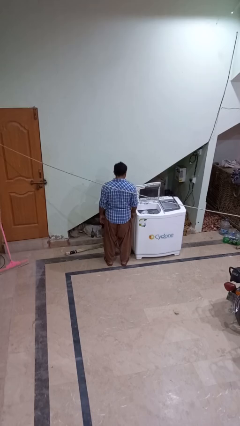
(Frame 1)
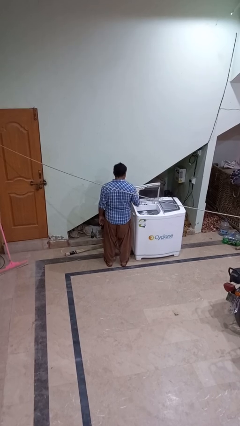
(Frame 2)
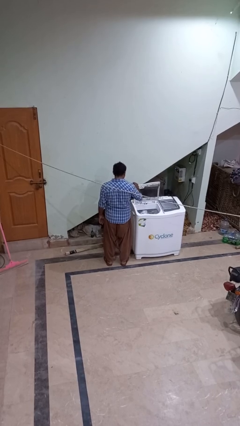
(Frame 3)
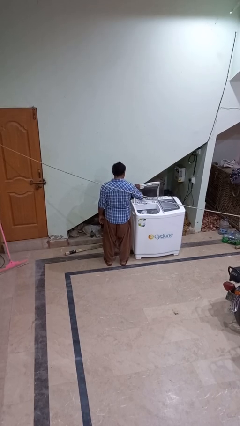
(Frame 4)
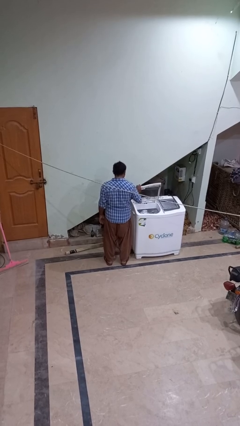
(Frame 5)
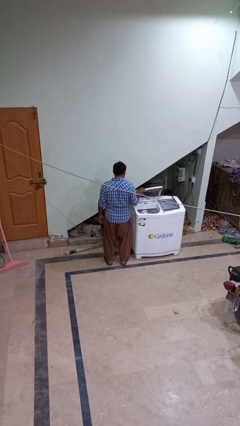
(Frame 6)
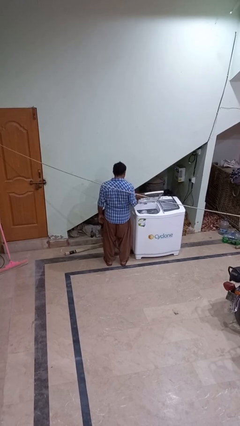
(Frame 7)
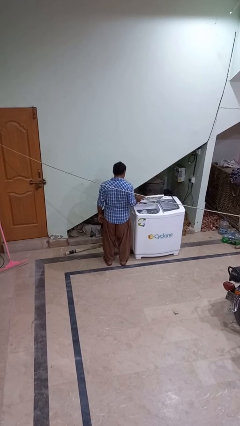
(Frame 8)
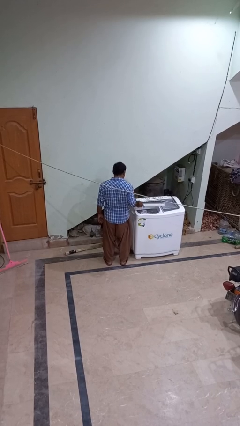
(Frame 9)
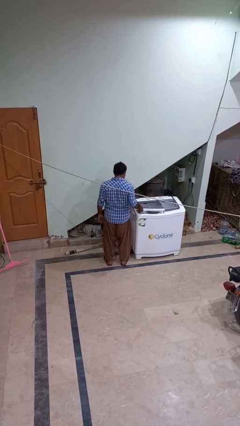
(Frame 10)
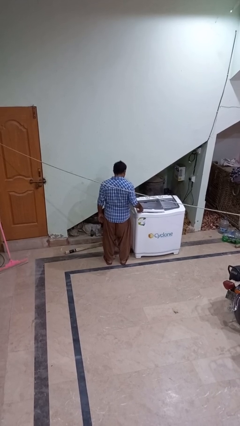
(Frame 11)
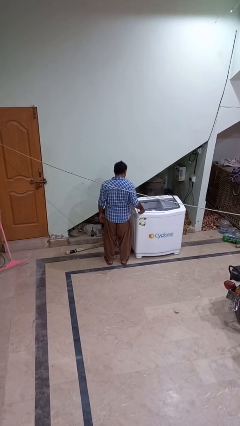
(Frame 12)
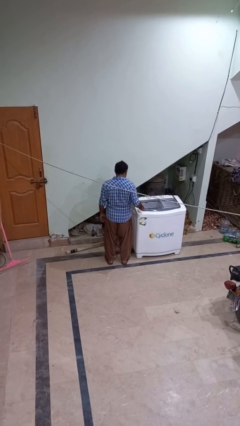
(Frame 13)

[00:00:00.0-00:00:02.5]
person closes clothes washer

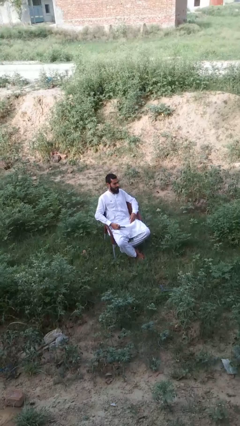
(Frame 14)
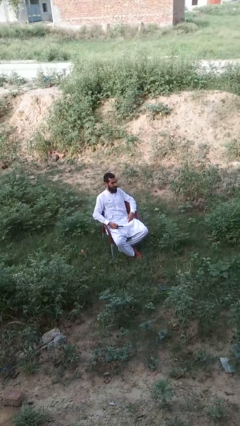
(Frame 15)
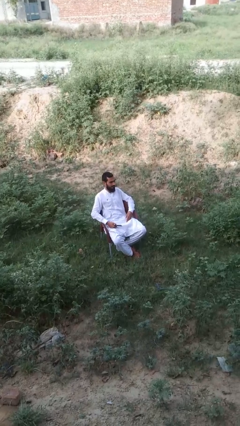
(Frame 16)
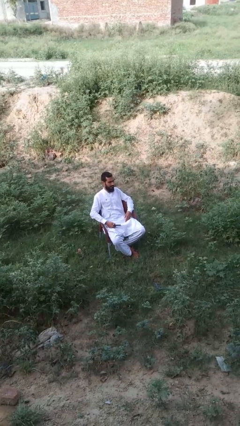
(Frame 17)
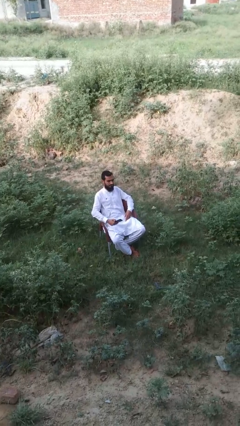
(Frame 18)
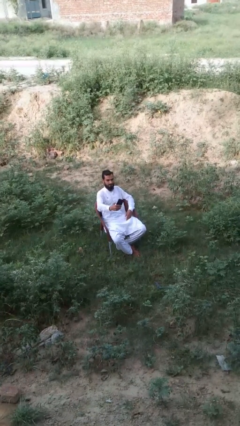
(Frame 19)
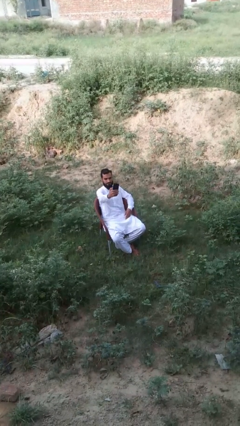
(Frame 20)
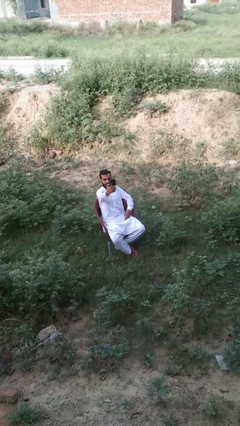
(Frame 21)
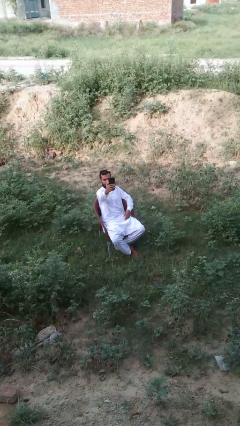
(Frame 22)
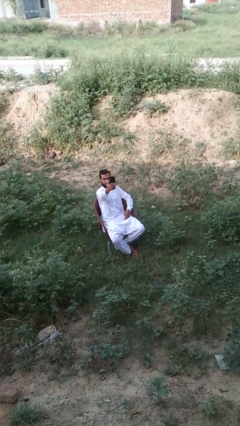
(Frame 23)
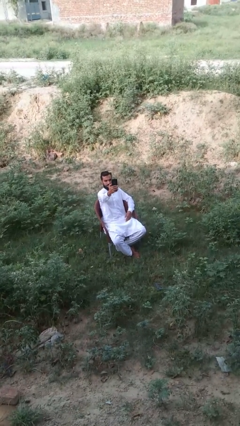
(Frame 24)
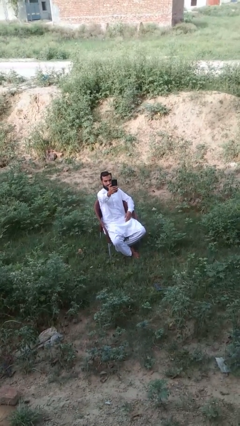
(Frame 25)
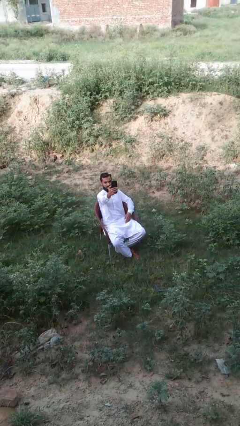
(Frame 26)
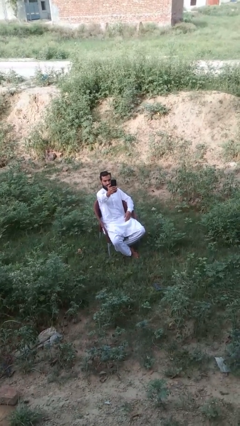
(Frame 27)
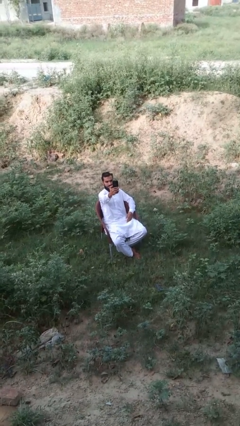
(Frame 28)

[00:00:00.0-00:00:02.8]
person takes selfie

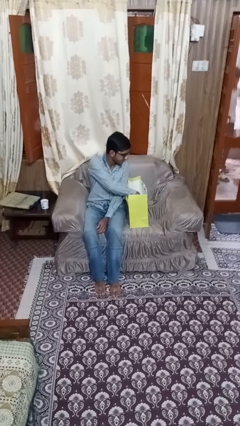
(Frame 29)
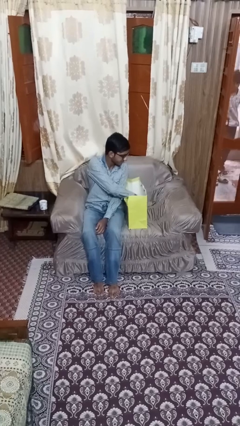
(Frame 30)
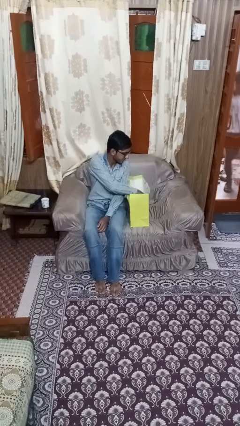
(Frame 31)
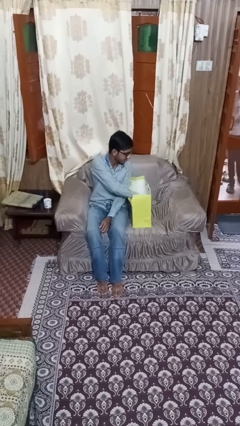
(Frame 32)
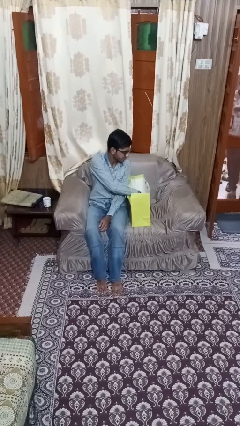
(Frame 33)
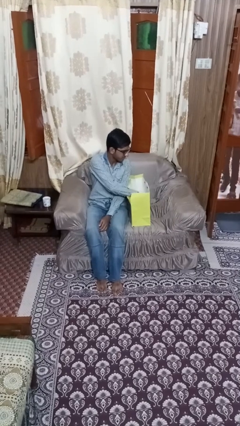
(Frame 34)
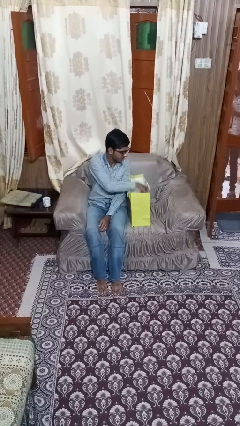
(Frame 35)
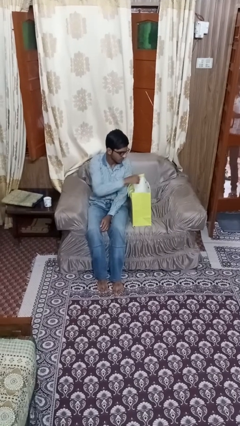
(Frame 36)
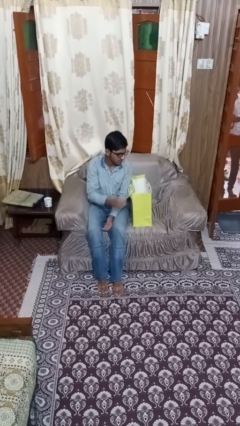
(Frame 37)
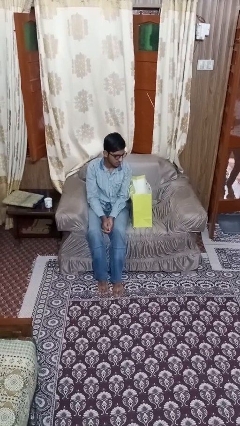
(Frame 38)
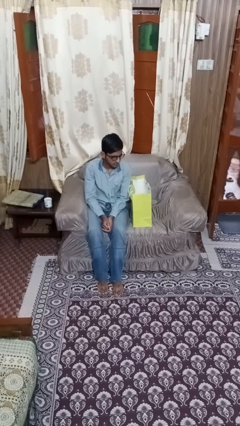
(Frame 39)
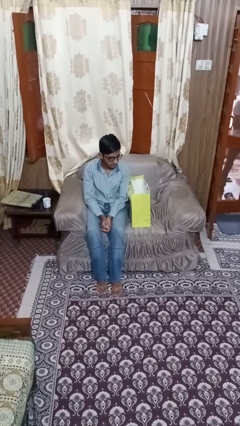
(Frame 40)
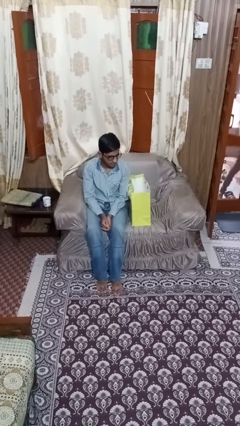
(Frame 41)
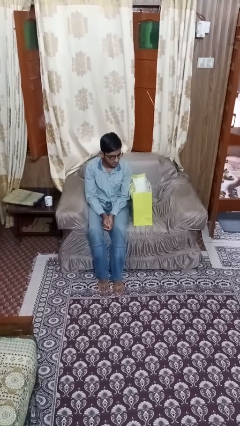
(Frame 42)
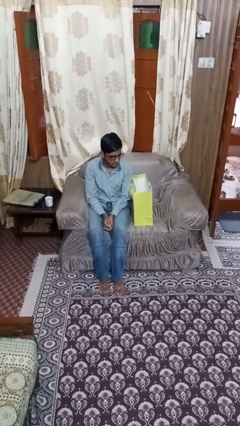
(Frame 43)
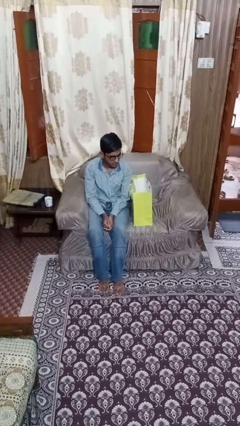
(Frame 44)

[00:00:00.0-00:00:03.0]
person searches in bag

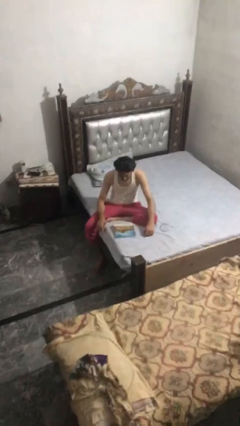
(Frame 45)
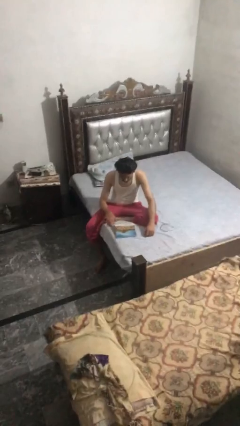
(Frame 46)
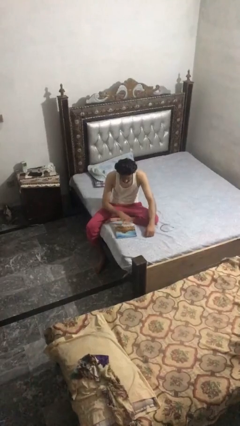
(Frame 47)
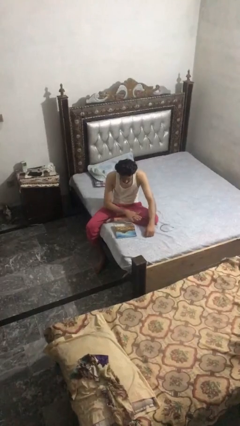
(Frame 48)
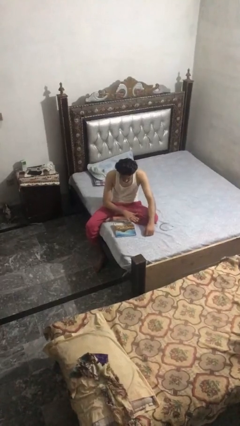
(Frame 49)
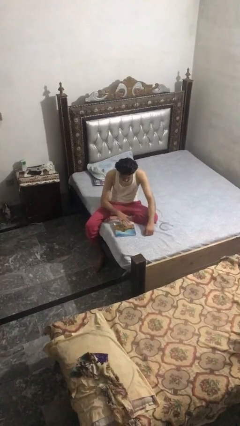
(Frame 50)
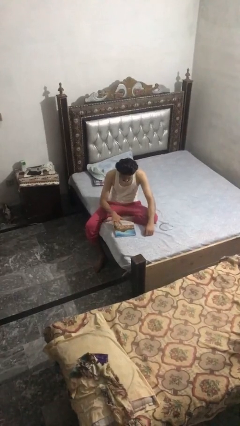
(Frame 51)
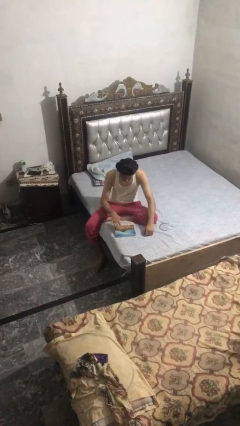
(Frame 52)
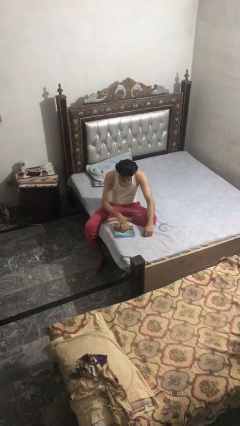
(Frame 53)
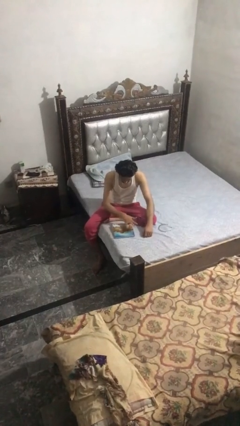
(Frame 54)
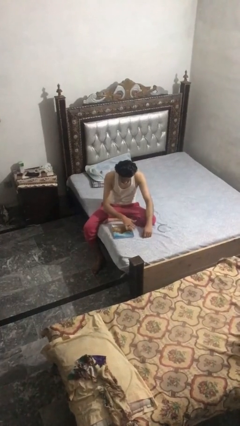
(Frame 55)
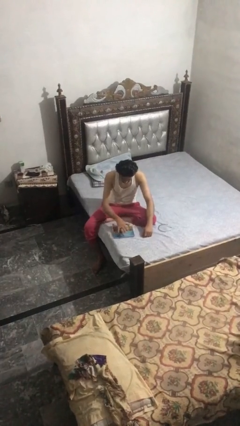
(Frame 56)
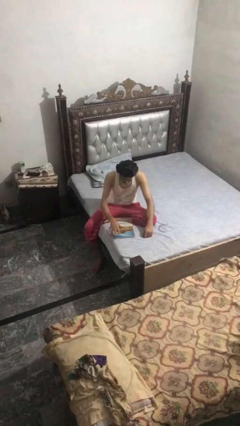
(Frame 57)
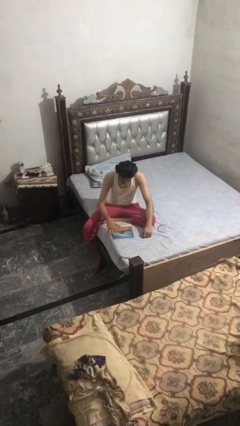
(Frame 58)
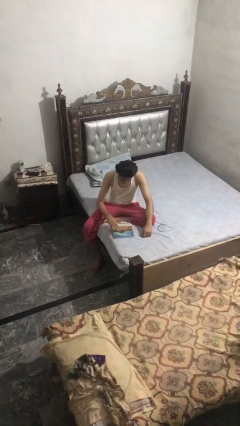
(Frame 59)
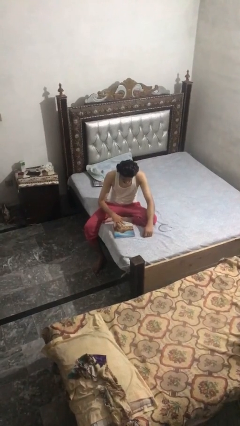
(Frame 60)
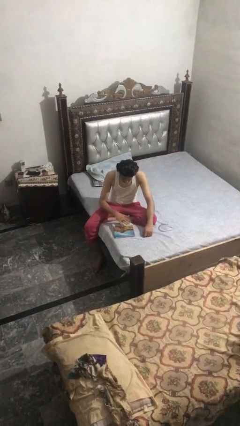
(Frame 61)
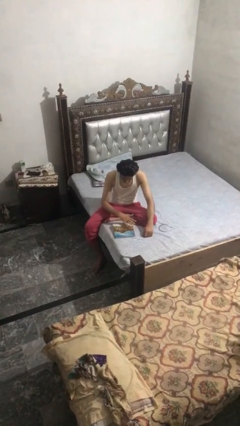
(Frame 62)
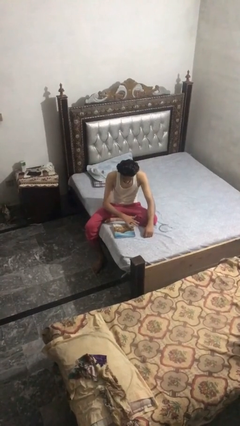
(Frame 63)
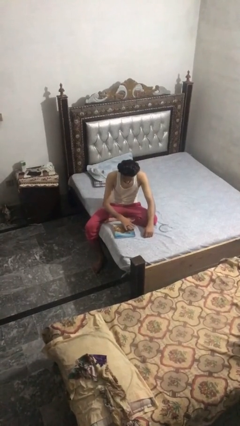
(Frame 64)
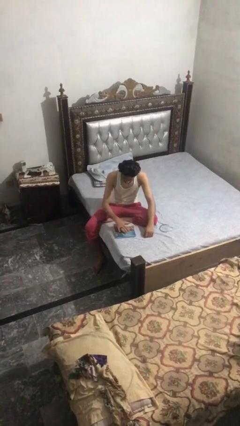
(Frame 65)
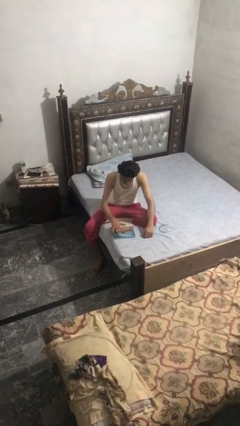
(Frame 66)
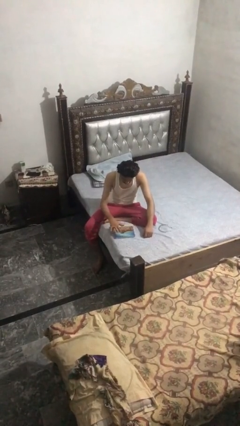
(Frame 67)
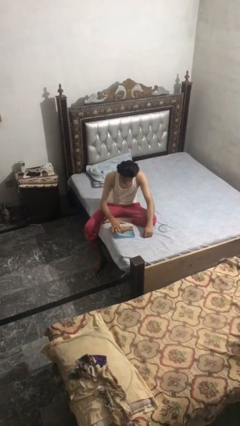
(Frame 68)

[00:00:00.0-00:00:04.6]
person waves hand over object

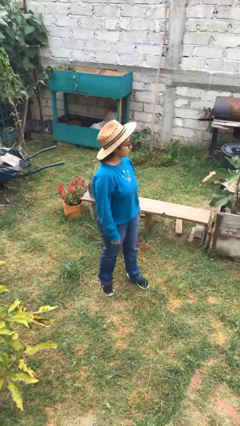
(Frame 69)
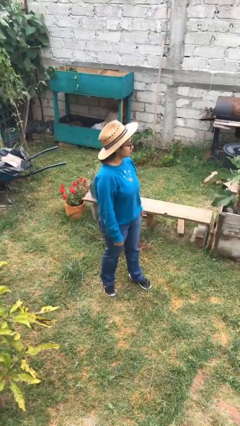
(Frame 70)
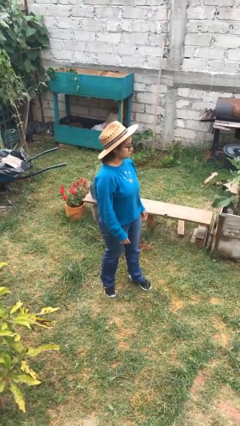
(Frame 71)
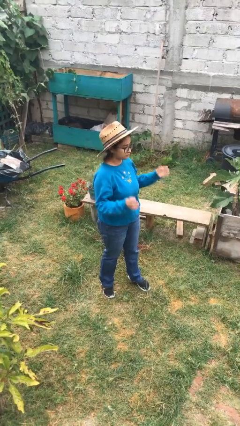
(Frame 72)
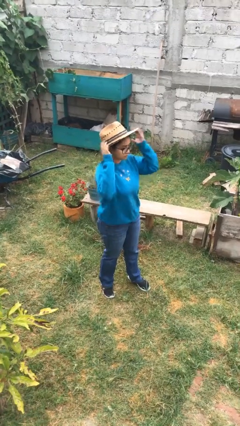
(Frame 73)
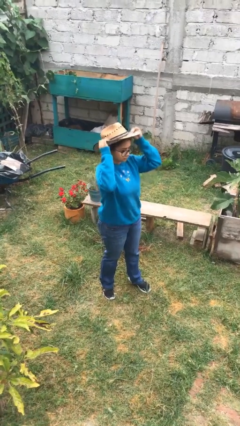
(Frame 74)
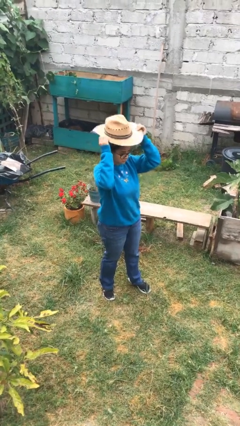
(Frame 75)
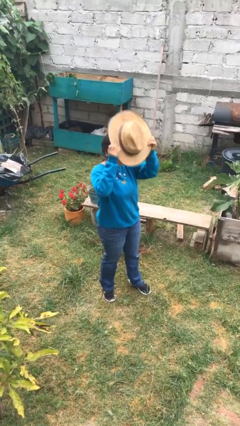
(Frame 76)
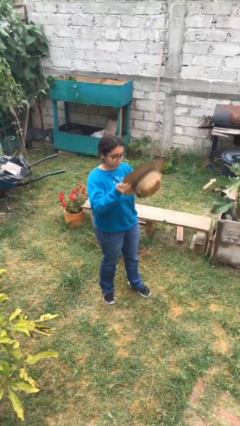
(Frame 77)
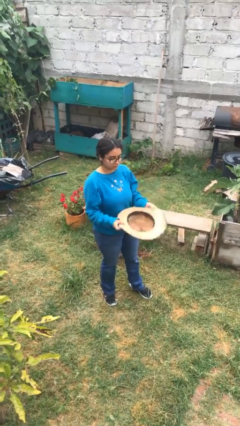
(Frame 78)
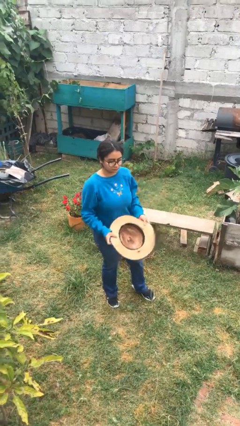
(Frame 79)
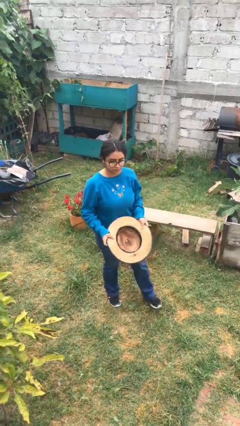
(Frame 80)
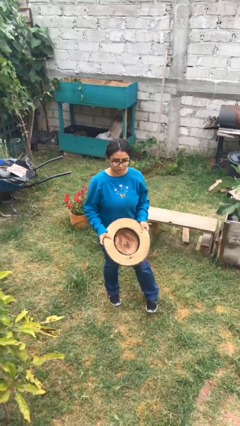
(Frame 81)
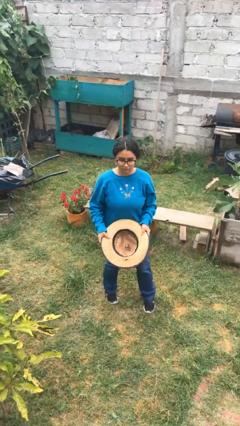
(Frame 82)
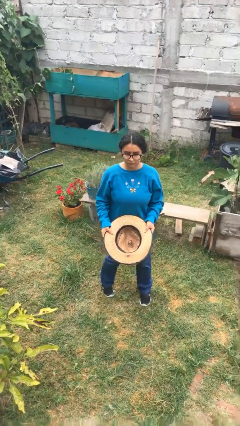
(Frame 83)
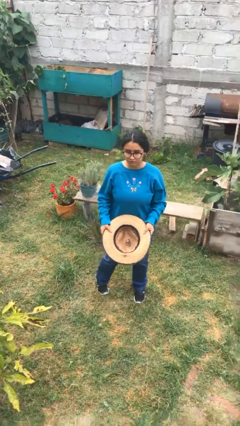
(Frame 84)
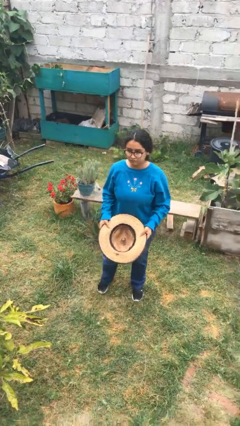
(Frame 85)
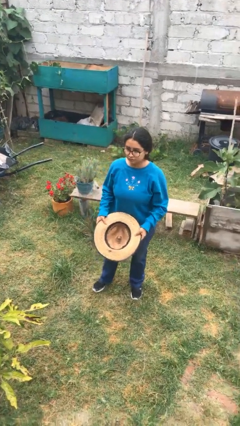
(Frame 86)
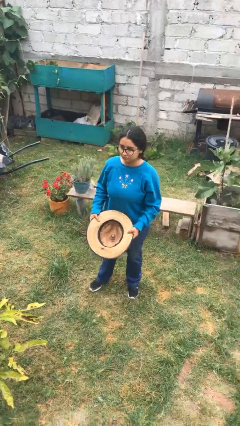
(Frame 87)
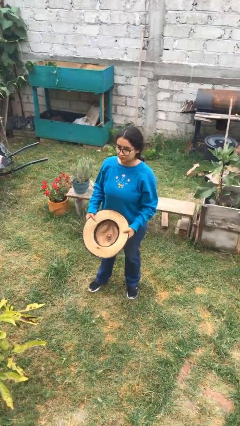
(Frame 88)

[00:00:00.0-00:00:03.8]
person takes off hat

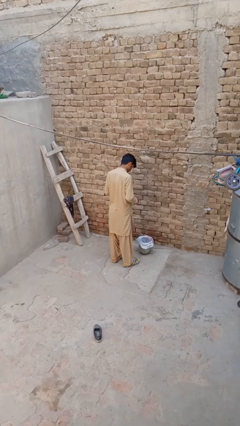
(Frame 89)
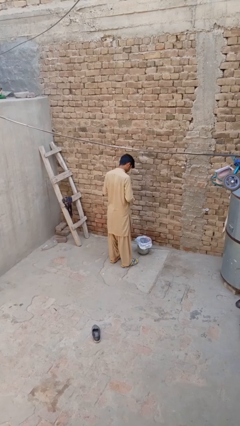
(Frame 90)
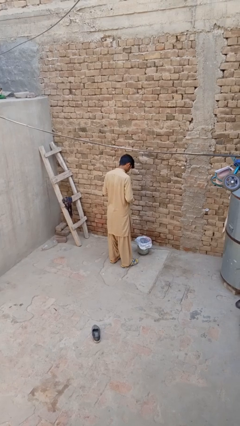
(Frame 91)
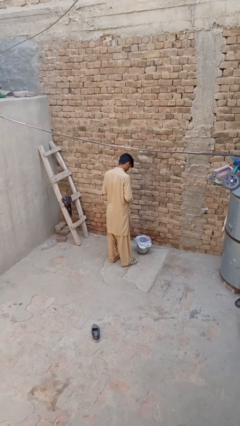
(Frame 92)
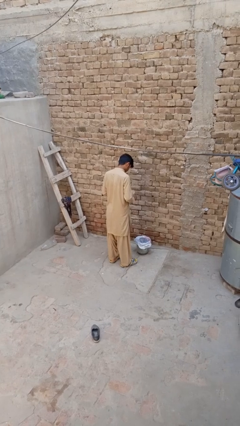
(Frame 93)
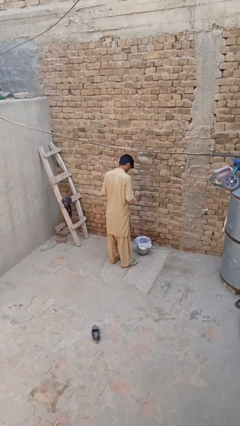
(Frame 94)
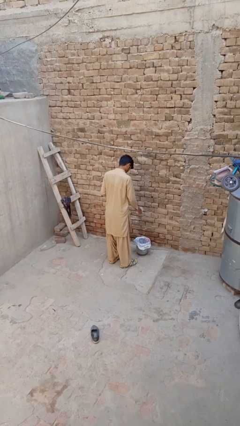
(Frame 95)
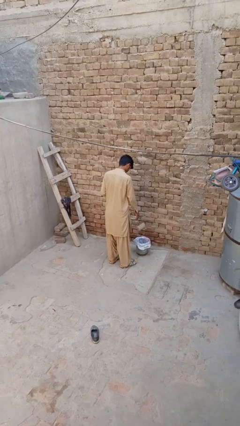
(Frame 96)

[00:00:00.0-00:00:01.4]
person discards trash
